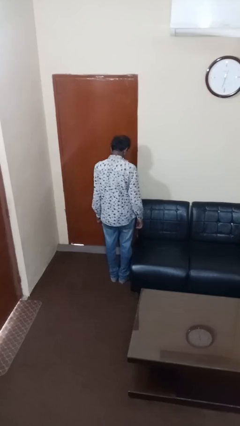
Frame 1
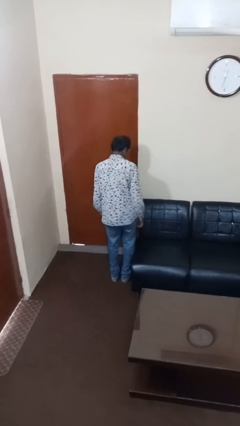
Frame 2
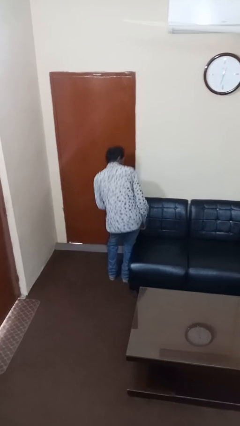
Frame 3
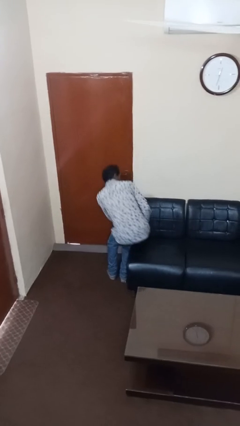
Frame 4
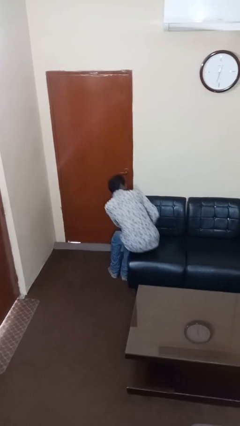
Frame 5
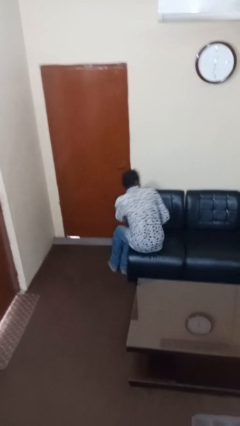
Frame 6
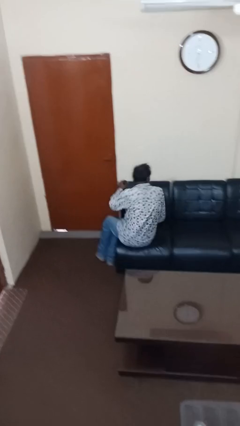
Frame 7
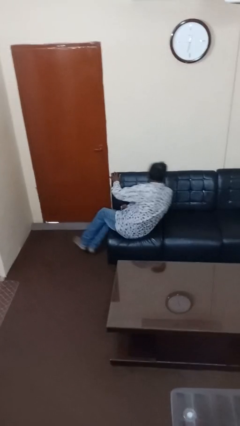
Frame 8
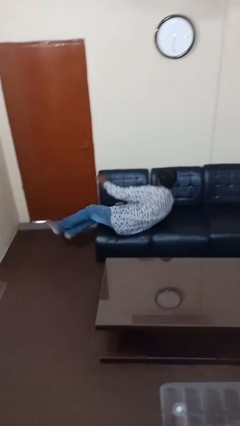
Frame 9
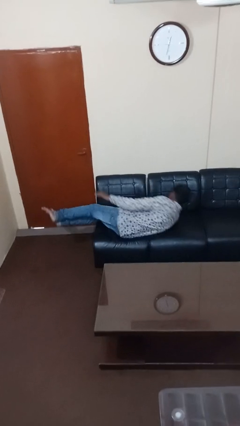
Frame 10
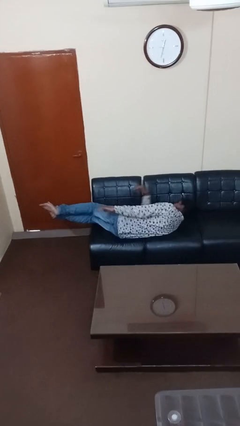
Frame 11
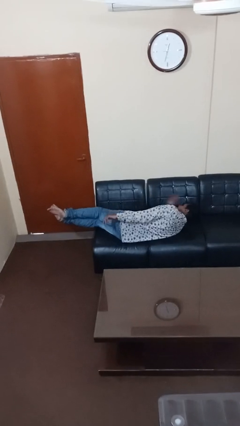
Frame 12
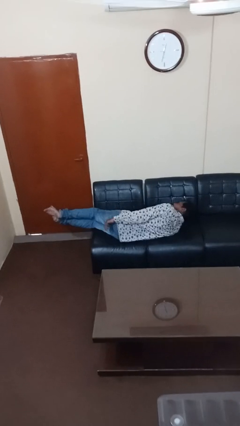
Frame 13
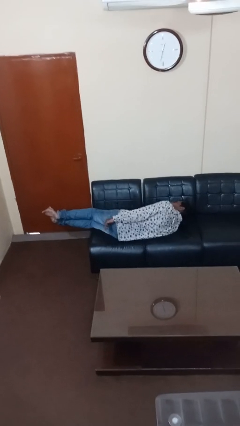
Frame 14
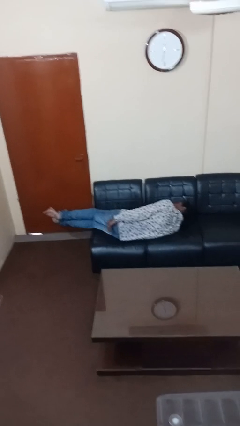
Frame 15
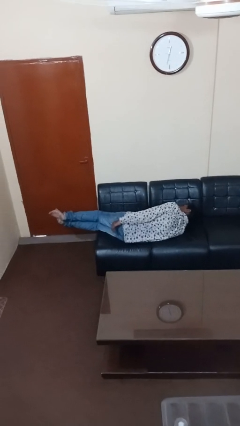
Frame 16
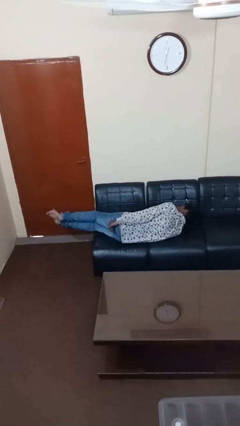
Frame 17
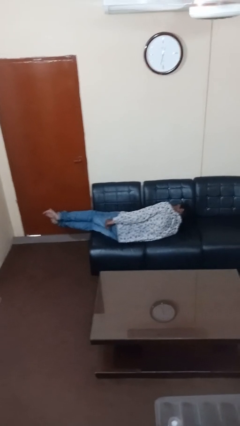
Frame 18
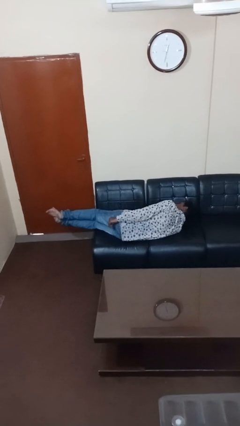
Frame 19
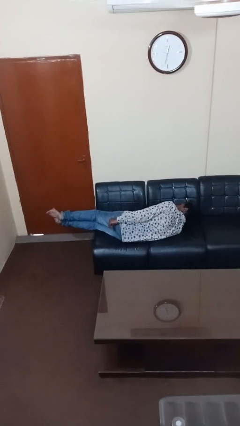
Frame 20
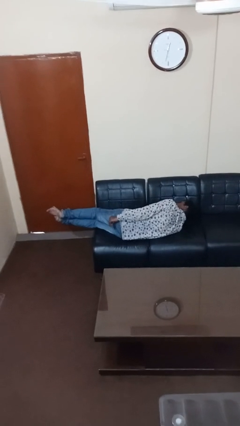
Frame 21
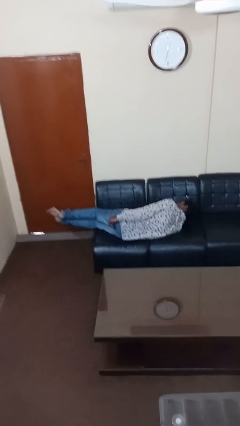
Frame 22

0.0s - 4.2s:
person lies down on couch

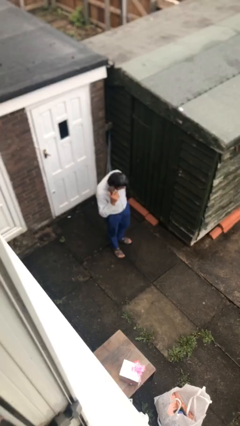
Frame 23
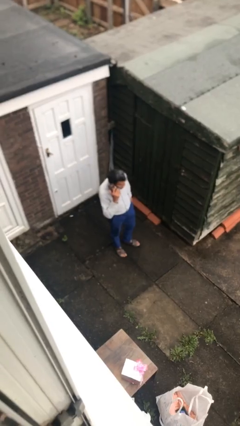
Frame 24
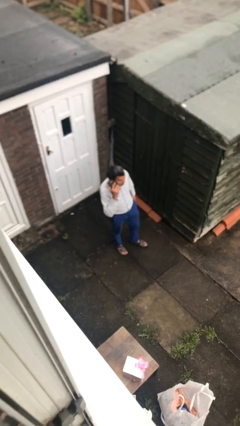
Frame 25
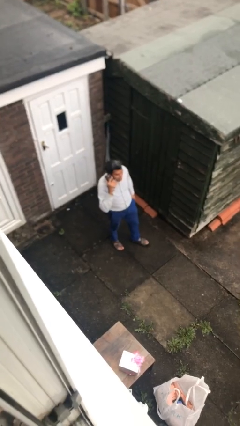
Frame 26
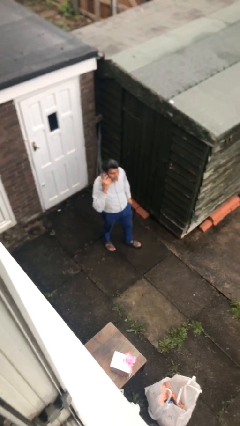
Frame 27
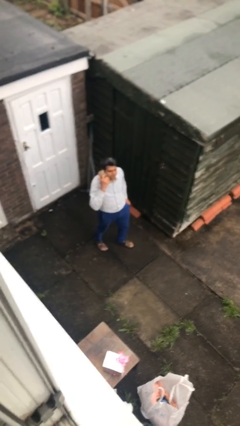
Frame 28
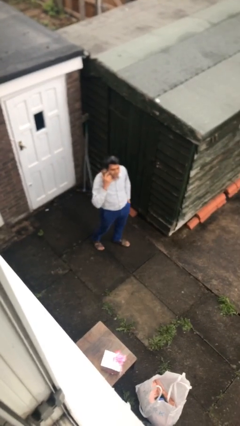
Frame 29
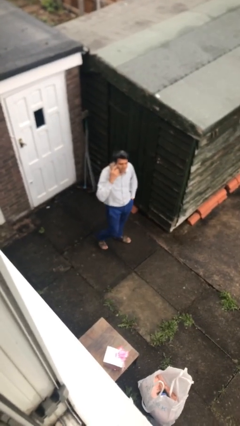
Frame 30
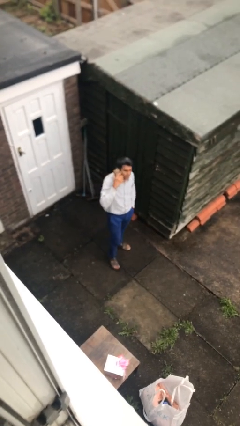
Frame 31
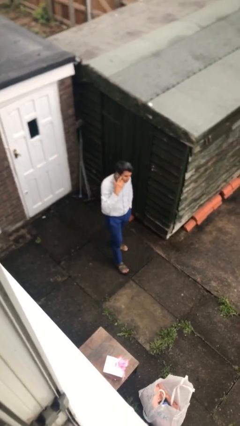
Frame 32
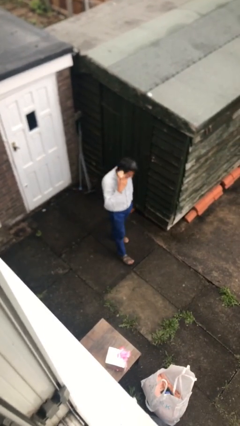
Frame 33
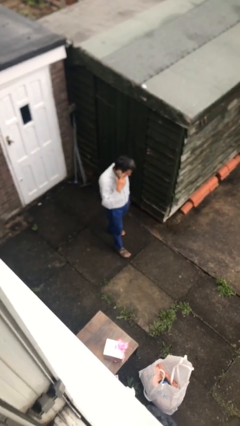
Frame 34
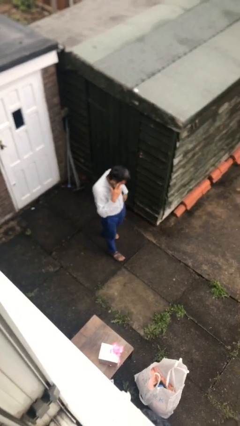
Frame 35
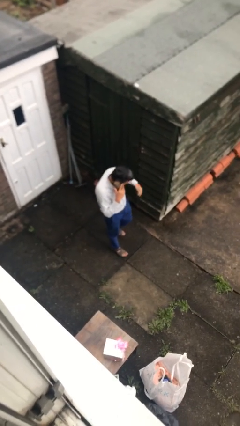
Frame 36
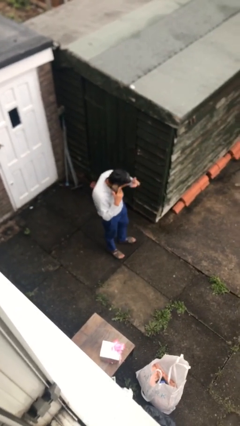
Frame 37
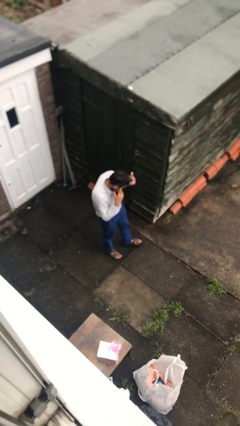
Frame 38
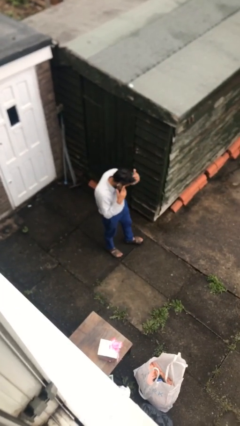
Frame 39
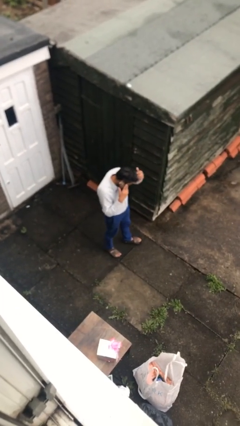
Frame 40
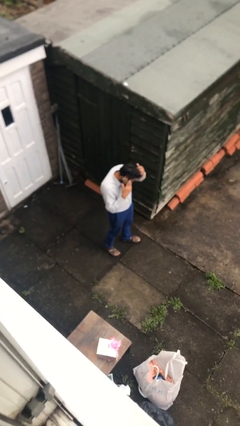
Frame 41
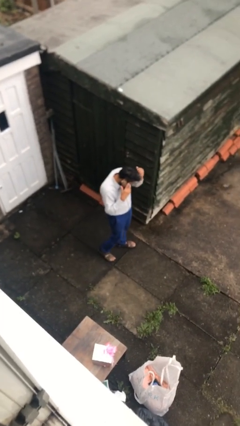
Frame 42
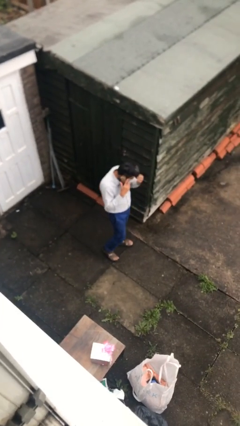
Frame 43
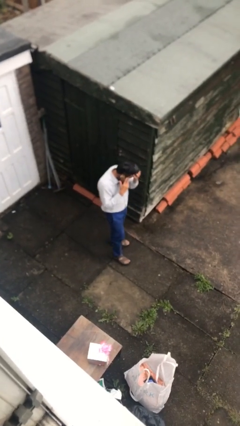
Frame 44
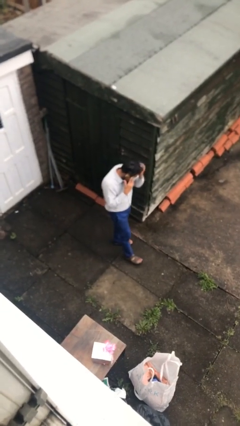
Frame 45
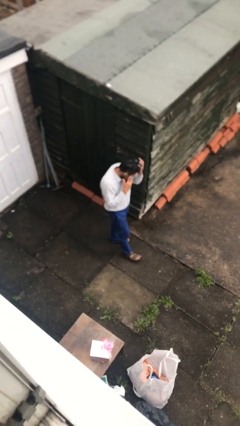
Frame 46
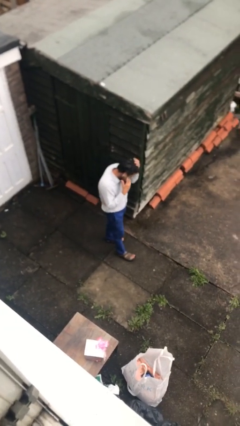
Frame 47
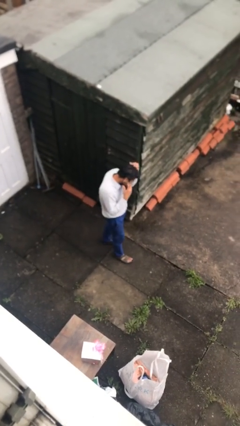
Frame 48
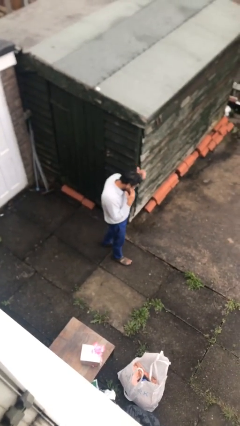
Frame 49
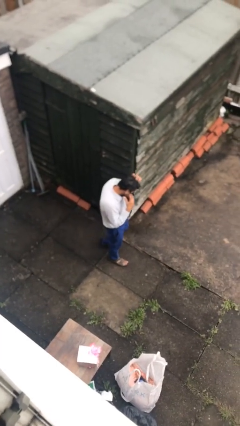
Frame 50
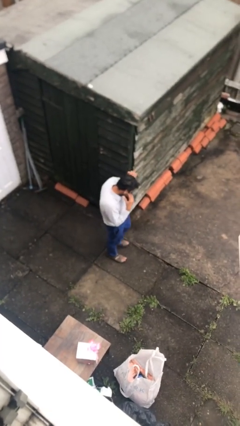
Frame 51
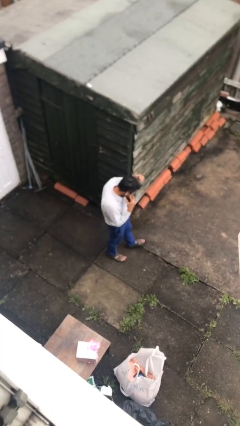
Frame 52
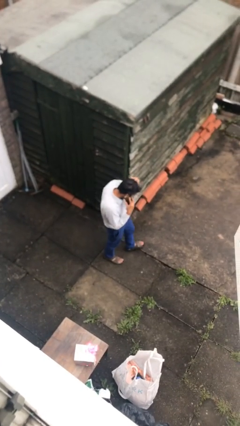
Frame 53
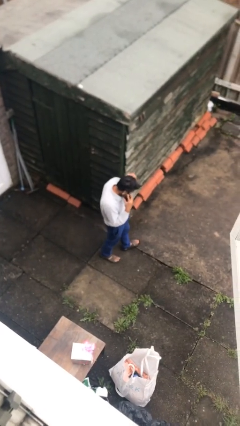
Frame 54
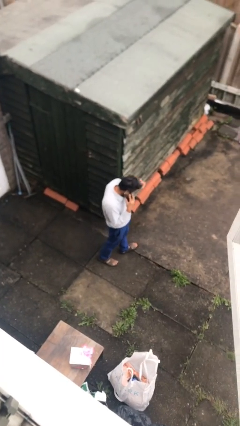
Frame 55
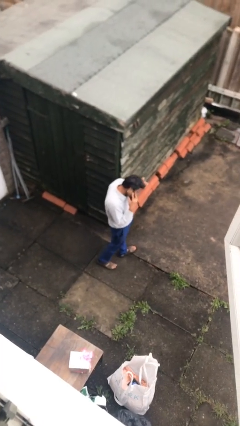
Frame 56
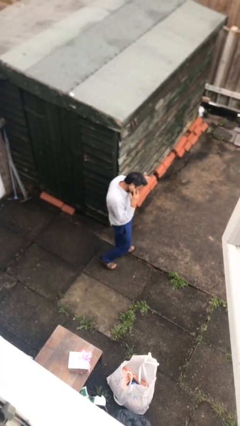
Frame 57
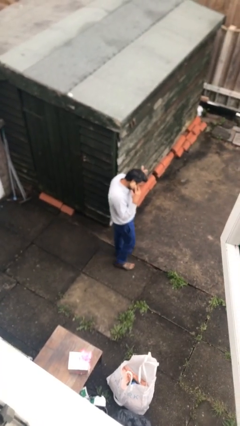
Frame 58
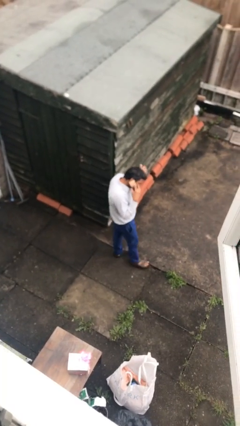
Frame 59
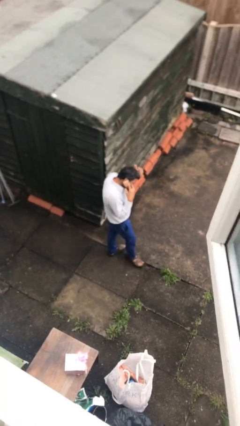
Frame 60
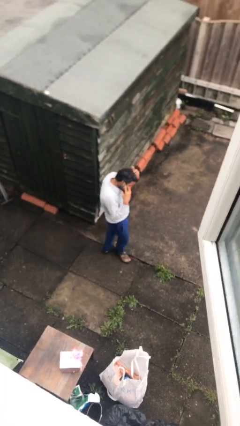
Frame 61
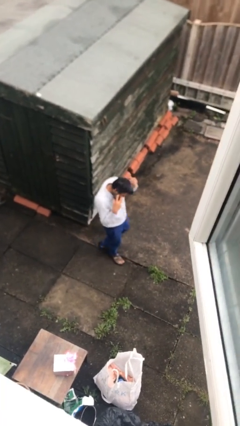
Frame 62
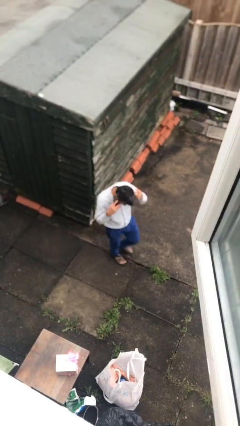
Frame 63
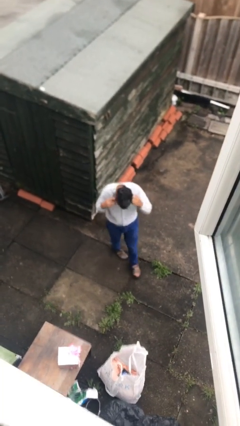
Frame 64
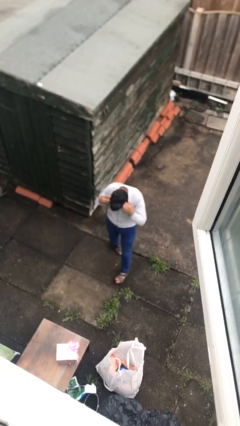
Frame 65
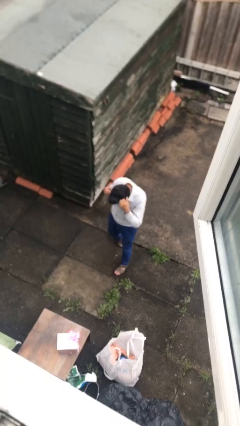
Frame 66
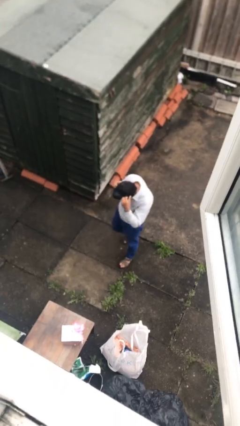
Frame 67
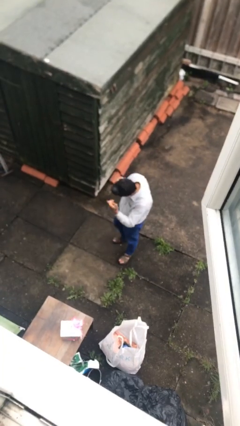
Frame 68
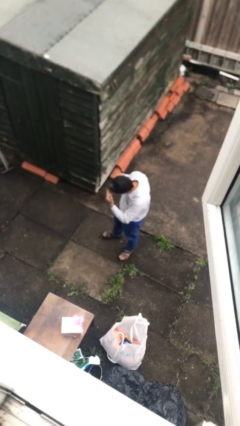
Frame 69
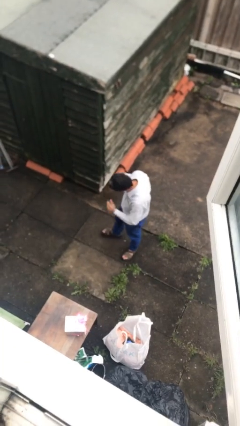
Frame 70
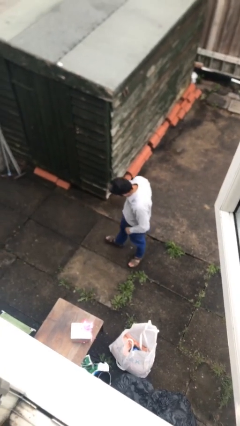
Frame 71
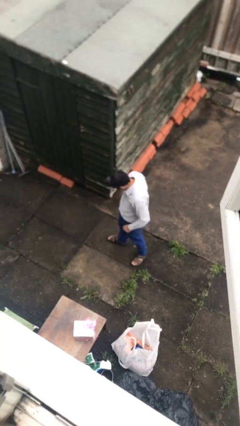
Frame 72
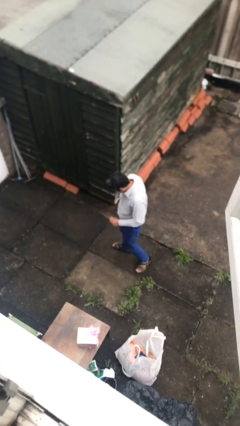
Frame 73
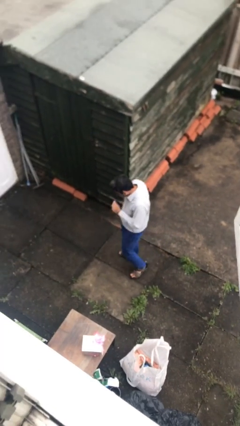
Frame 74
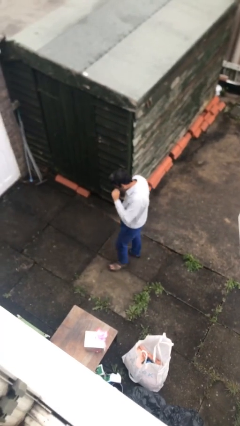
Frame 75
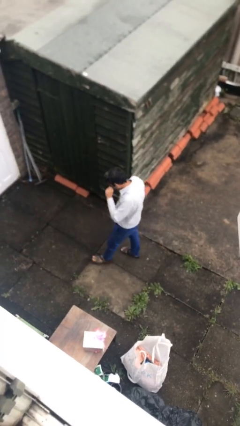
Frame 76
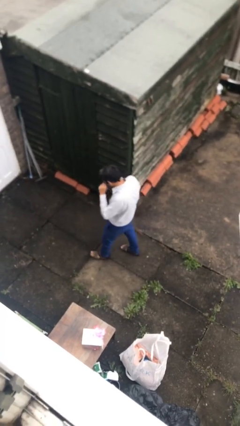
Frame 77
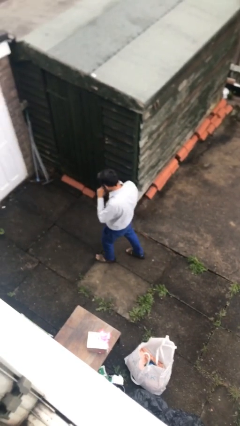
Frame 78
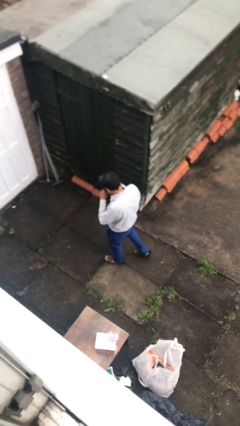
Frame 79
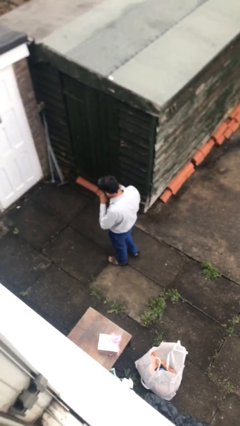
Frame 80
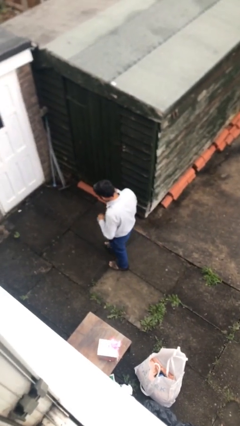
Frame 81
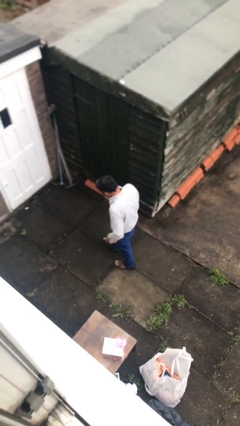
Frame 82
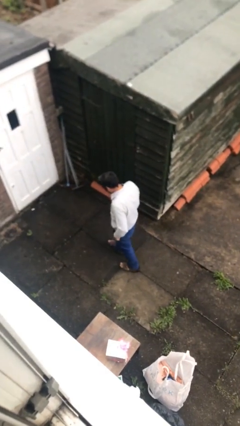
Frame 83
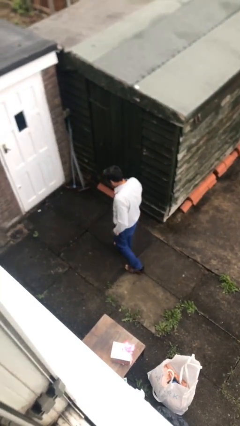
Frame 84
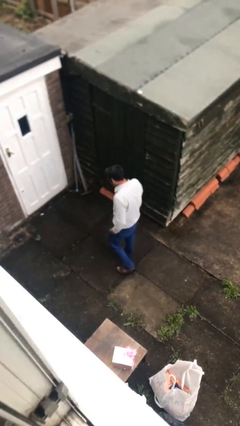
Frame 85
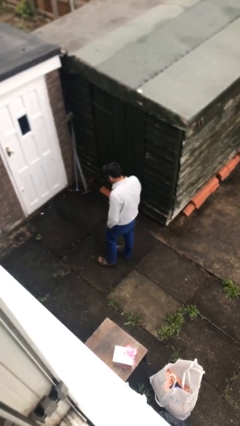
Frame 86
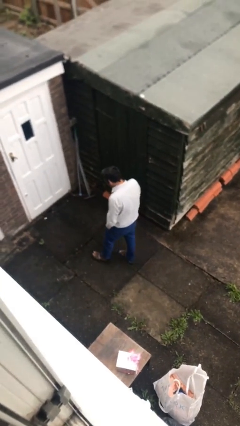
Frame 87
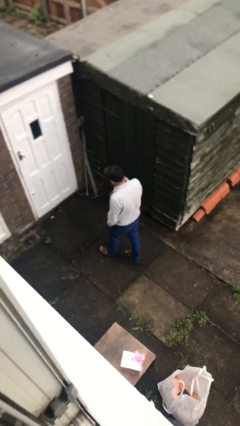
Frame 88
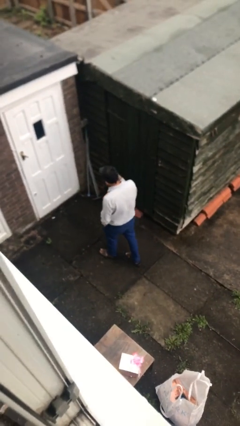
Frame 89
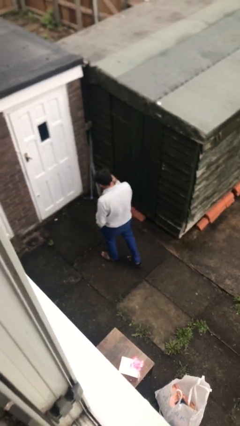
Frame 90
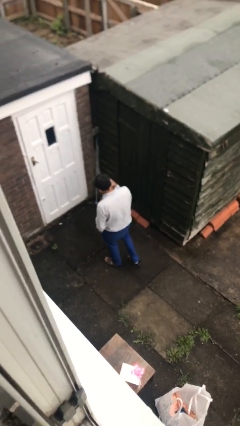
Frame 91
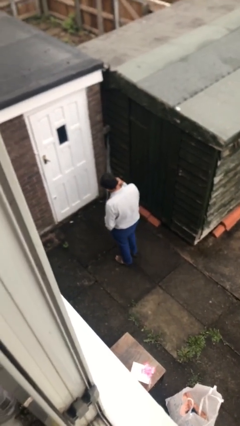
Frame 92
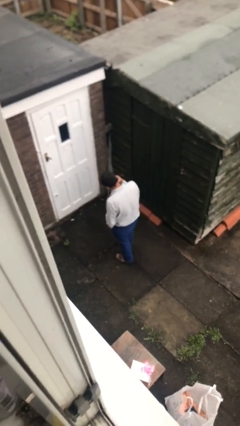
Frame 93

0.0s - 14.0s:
person talks on phone
